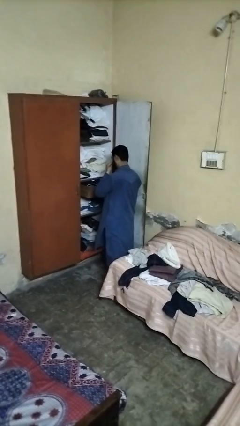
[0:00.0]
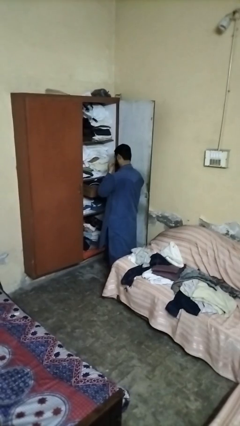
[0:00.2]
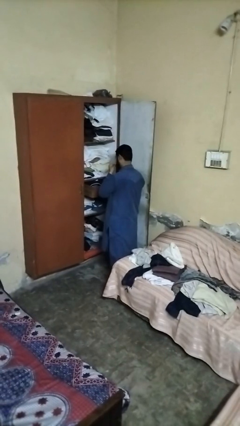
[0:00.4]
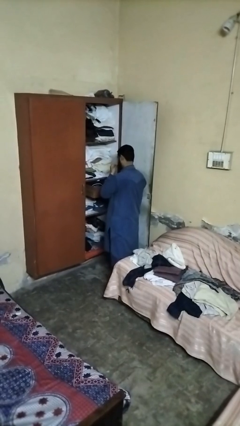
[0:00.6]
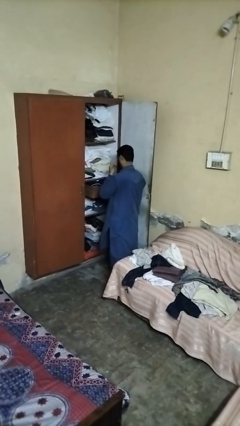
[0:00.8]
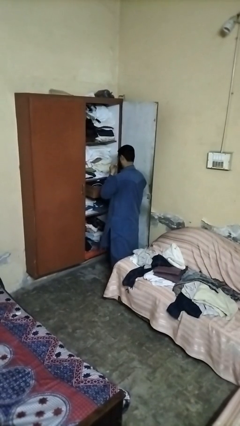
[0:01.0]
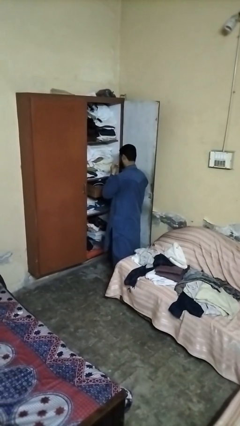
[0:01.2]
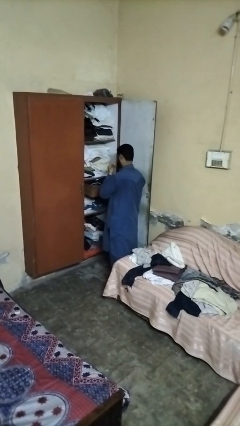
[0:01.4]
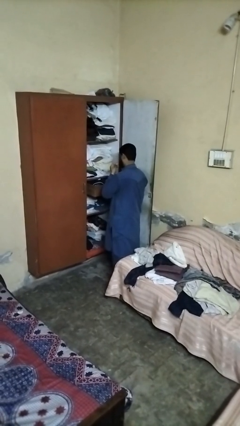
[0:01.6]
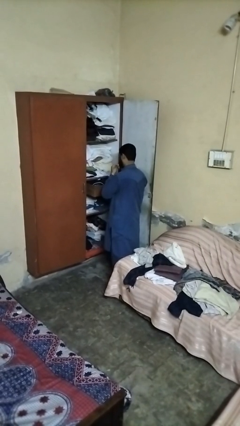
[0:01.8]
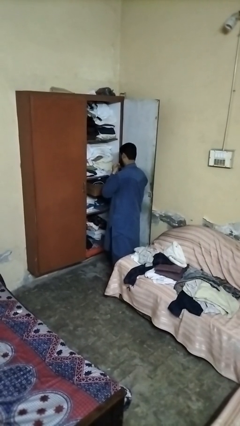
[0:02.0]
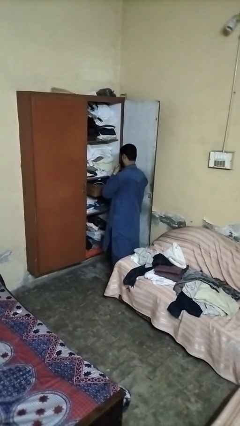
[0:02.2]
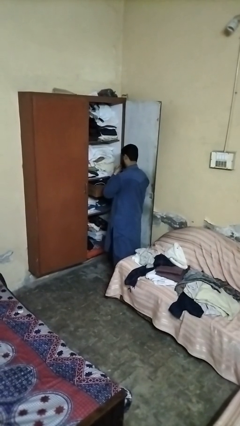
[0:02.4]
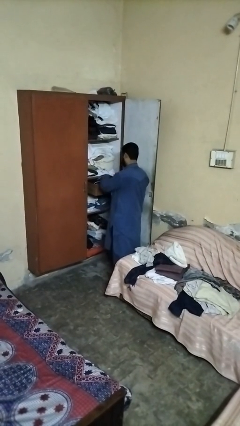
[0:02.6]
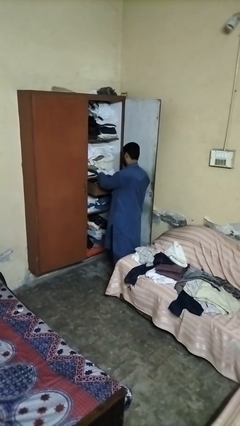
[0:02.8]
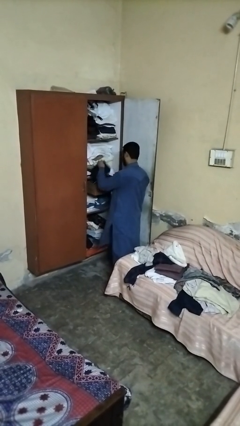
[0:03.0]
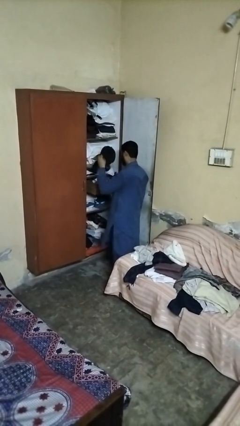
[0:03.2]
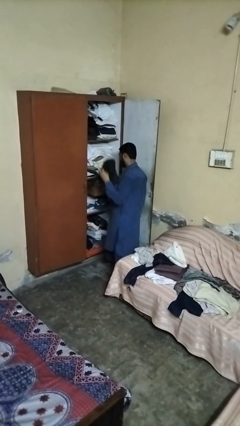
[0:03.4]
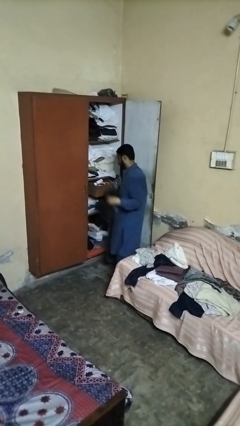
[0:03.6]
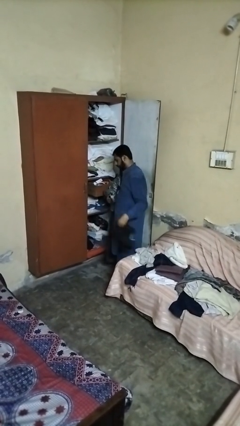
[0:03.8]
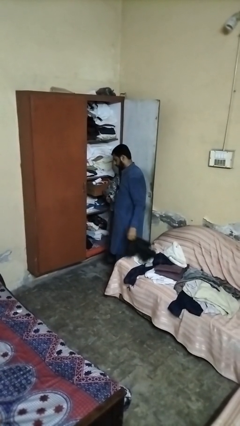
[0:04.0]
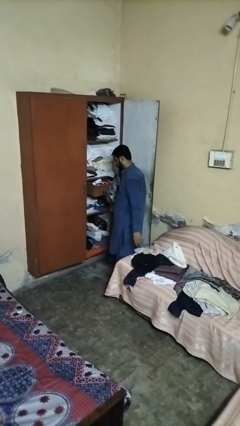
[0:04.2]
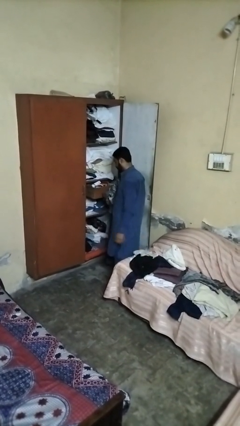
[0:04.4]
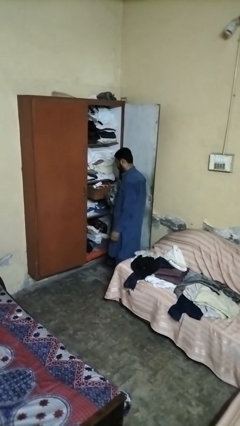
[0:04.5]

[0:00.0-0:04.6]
person takes clothes from dresser

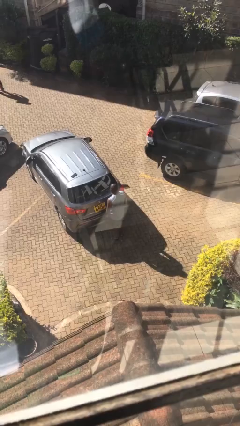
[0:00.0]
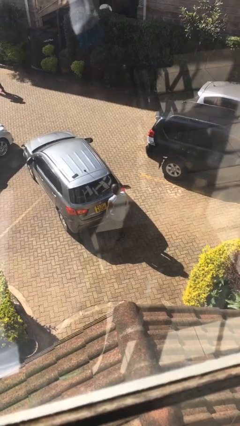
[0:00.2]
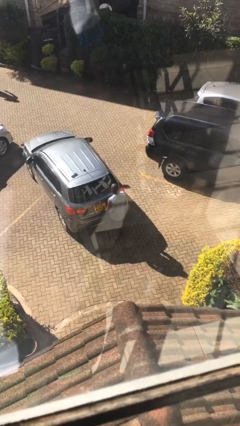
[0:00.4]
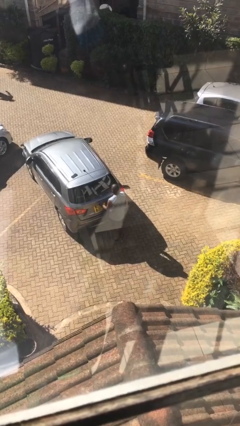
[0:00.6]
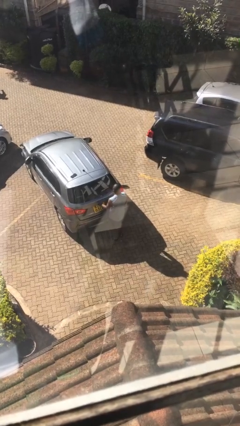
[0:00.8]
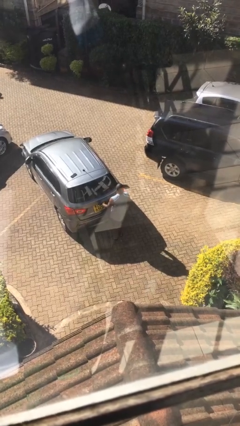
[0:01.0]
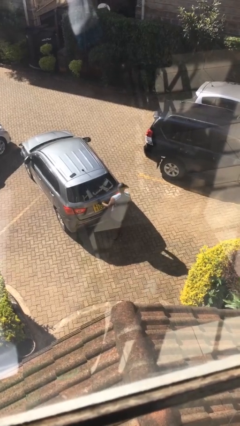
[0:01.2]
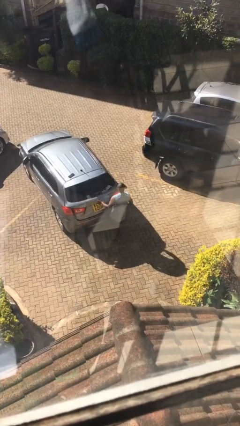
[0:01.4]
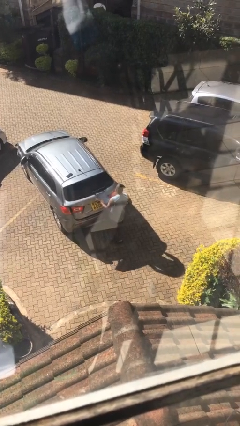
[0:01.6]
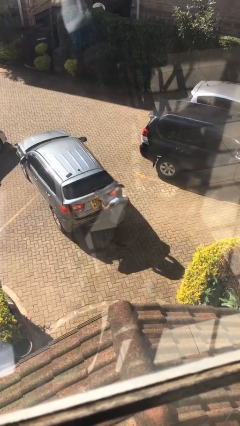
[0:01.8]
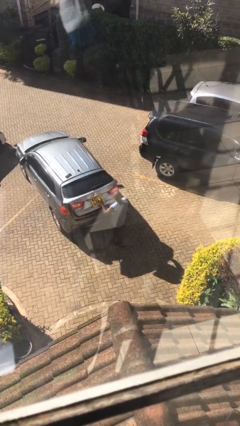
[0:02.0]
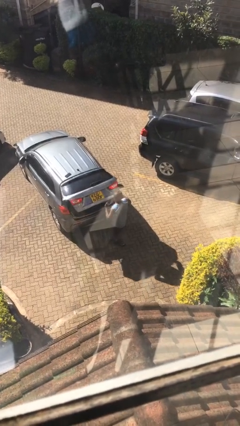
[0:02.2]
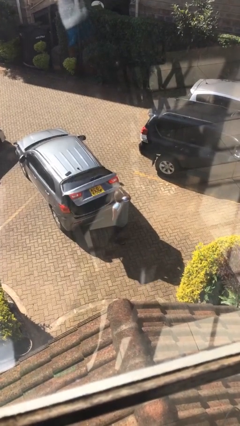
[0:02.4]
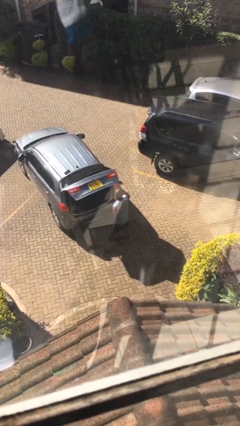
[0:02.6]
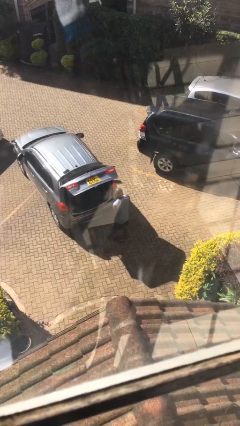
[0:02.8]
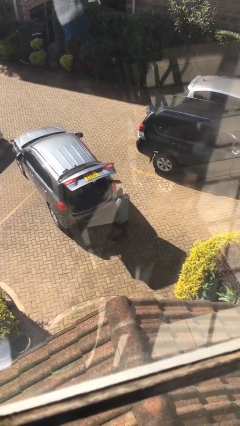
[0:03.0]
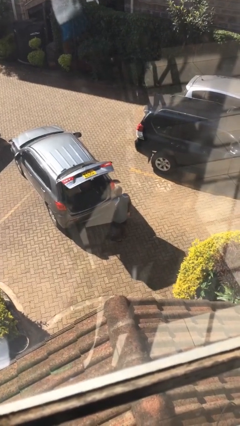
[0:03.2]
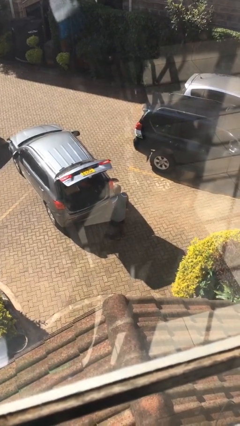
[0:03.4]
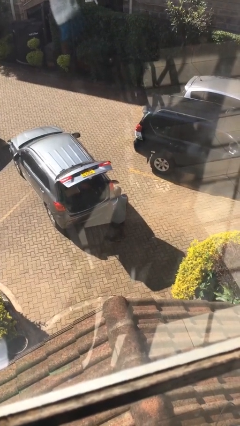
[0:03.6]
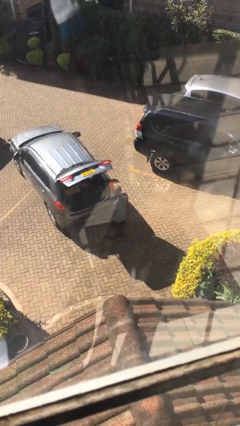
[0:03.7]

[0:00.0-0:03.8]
person opens car trunk

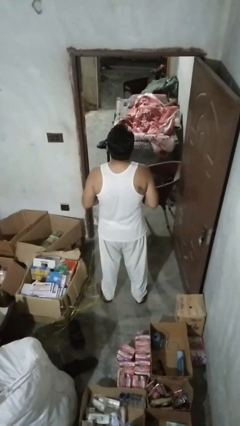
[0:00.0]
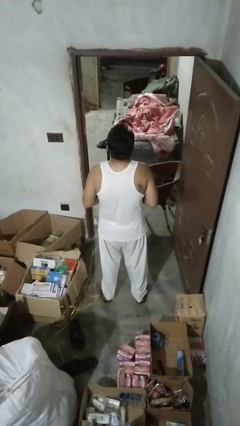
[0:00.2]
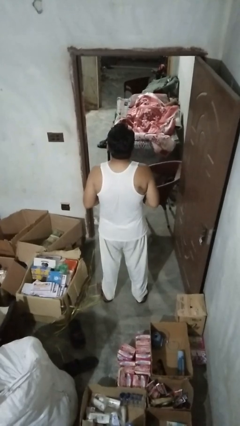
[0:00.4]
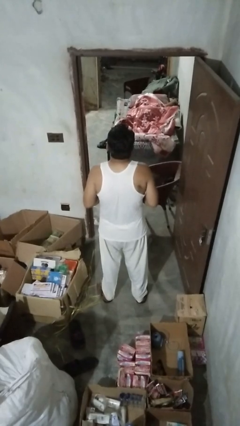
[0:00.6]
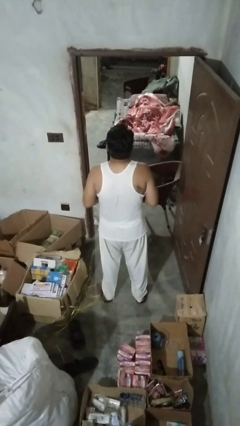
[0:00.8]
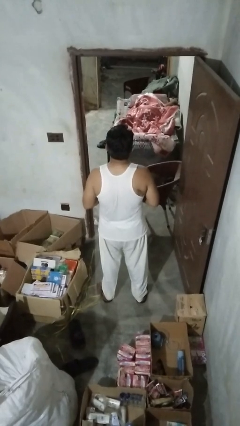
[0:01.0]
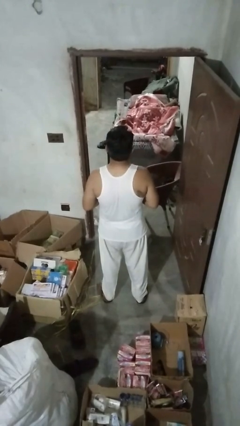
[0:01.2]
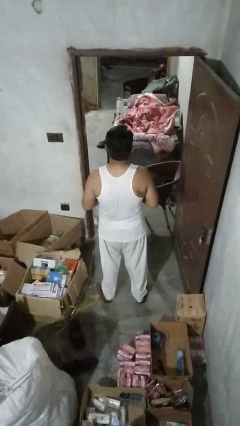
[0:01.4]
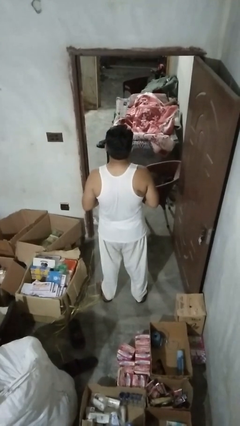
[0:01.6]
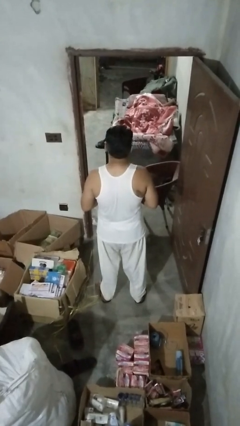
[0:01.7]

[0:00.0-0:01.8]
person shrugs

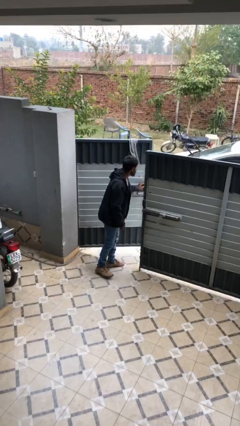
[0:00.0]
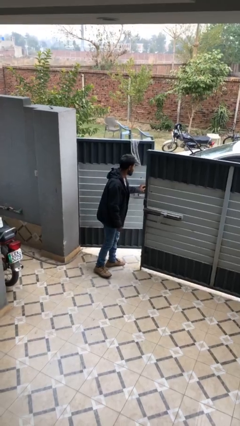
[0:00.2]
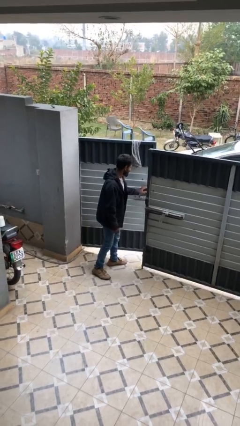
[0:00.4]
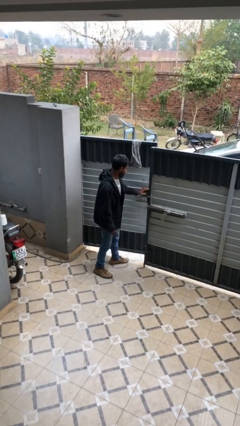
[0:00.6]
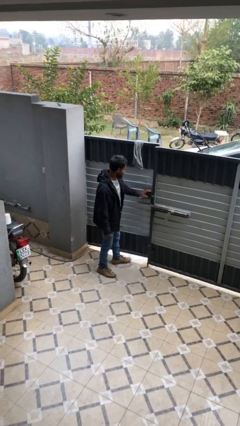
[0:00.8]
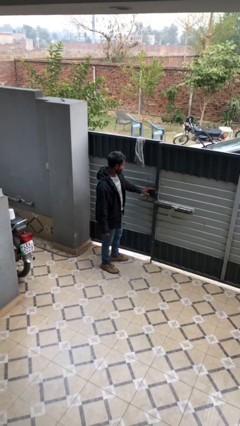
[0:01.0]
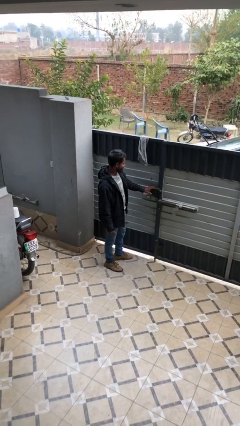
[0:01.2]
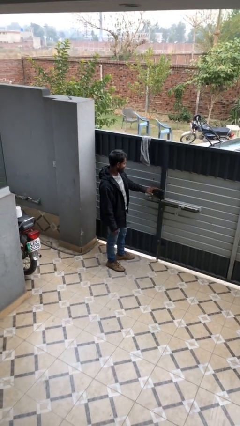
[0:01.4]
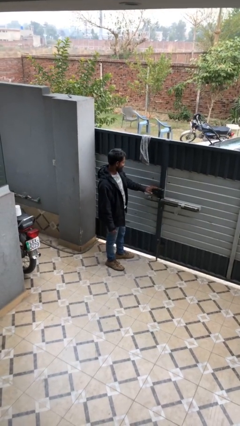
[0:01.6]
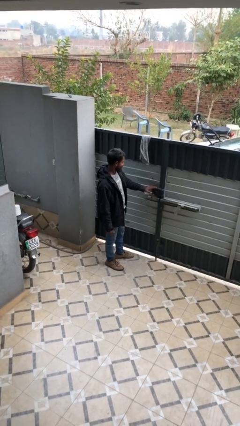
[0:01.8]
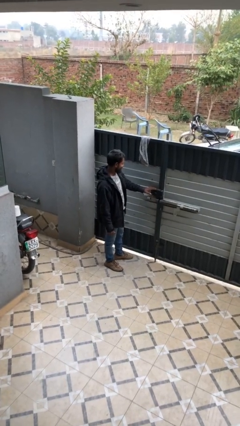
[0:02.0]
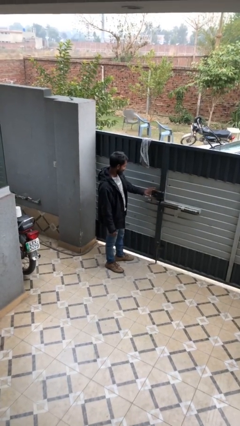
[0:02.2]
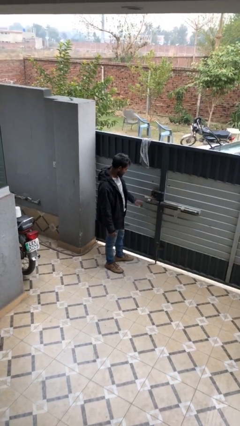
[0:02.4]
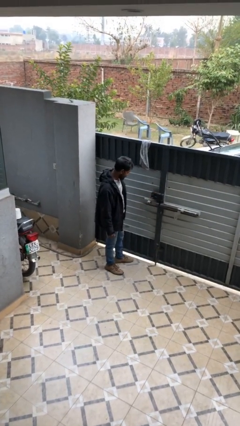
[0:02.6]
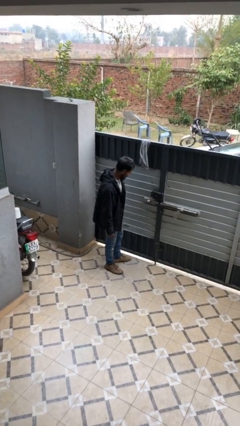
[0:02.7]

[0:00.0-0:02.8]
person closes facility door

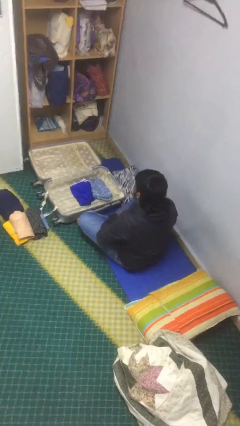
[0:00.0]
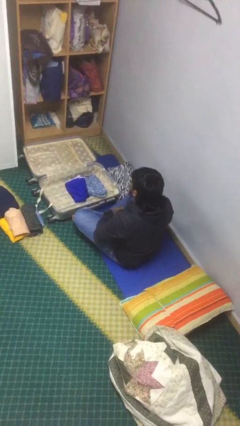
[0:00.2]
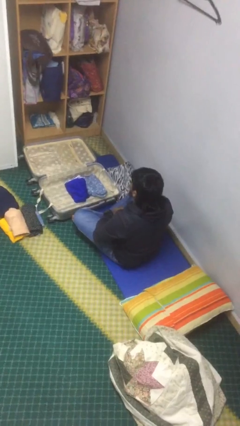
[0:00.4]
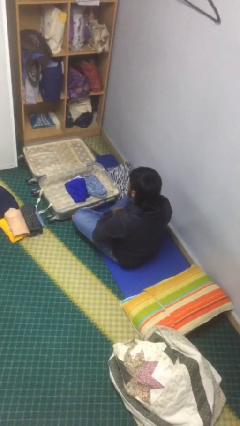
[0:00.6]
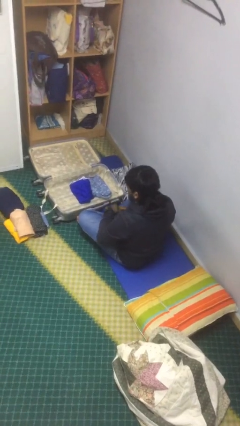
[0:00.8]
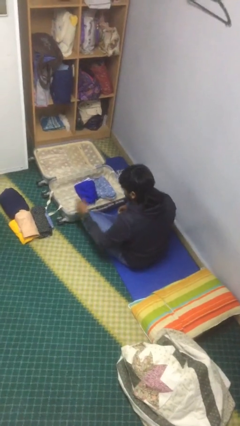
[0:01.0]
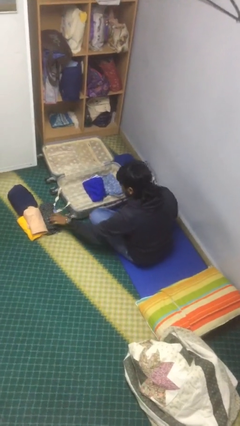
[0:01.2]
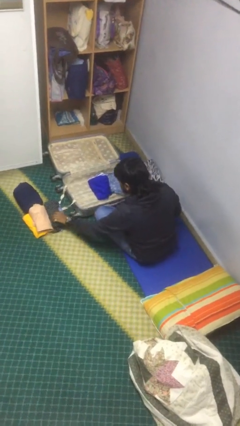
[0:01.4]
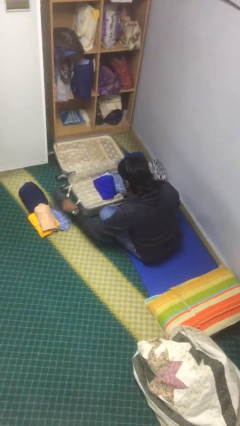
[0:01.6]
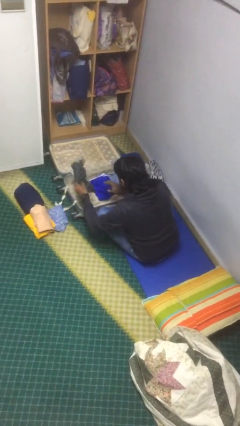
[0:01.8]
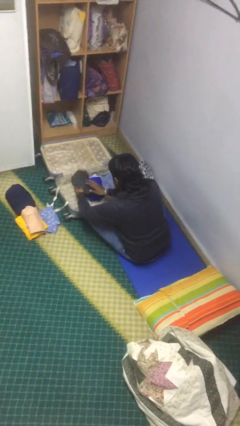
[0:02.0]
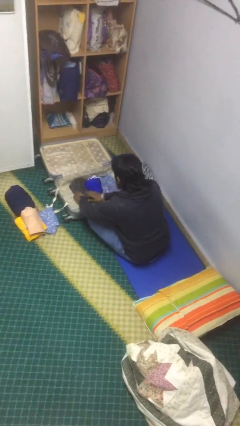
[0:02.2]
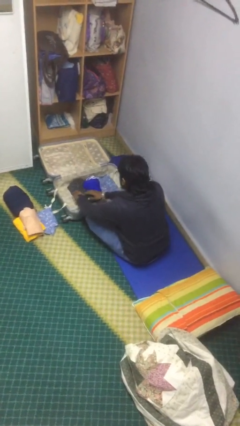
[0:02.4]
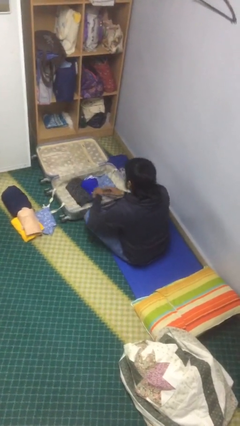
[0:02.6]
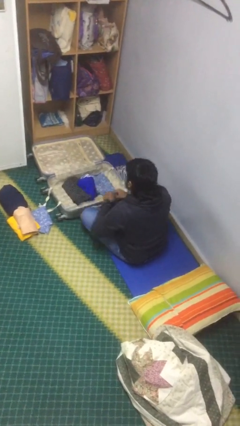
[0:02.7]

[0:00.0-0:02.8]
person loads clothes into suitcase

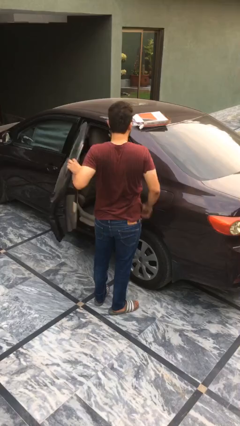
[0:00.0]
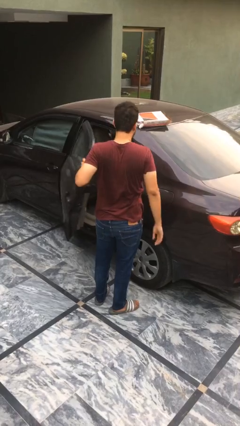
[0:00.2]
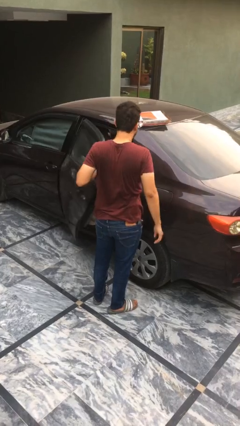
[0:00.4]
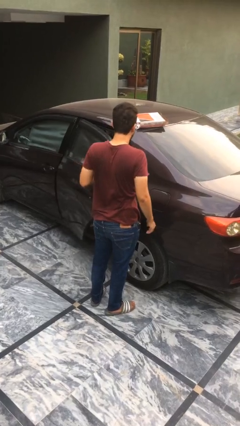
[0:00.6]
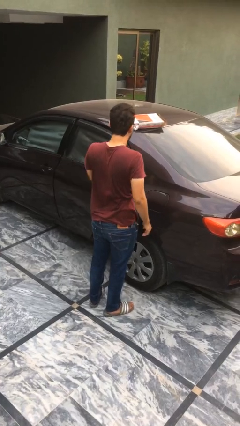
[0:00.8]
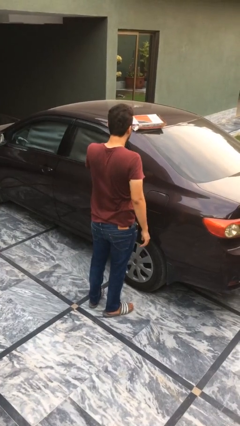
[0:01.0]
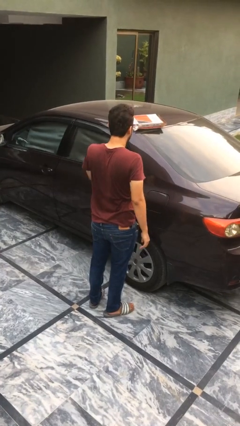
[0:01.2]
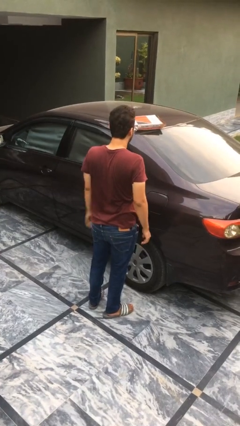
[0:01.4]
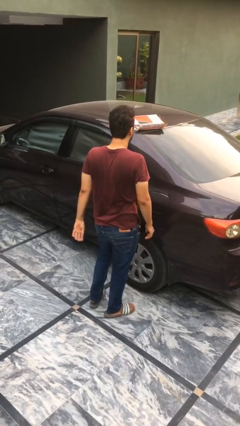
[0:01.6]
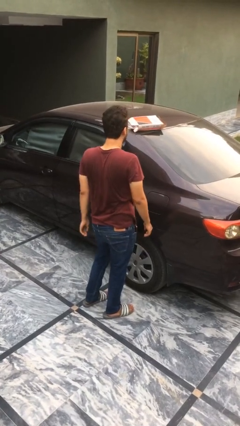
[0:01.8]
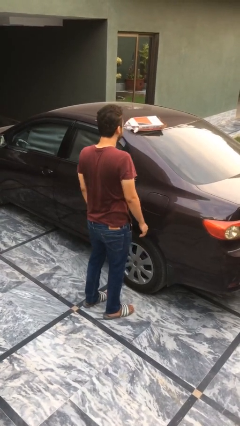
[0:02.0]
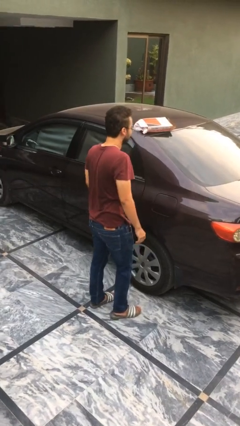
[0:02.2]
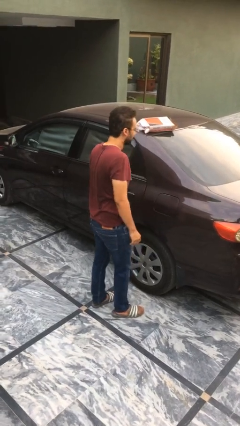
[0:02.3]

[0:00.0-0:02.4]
person closes car door
